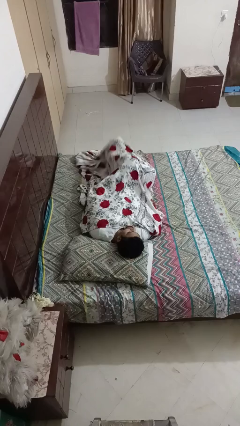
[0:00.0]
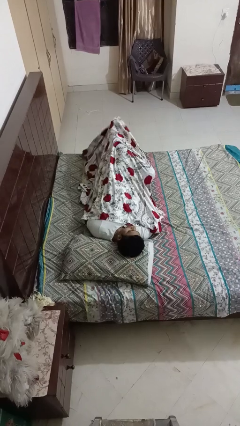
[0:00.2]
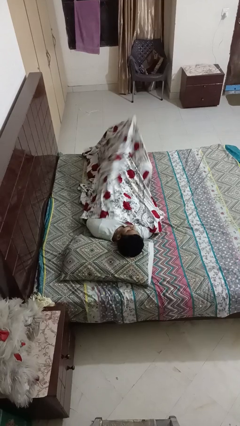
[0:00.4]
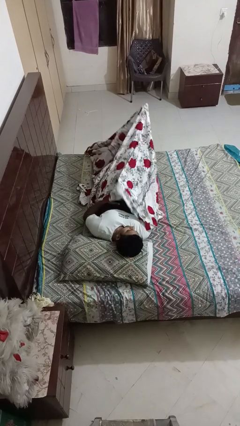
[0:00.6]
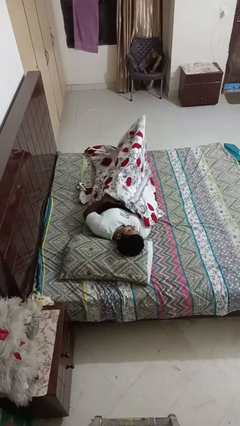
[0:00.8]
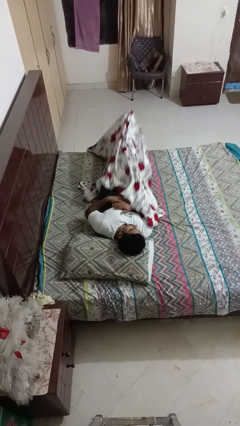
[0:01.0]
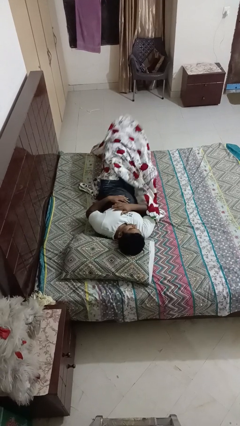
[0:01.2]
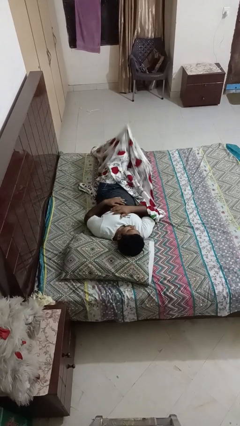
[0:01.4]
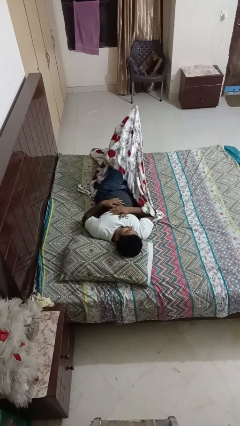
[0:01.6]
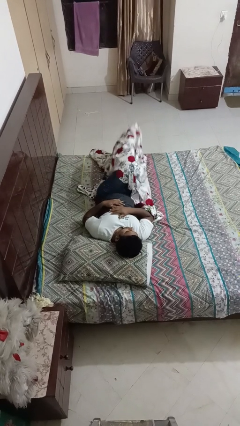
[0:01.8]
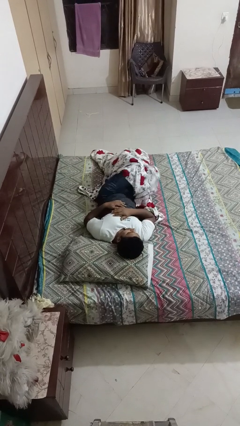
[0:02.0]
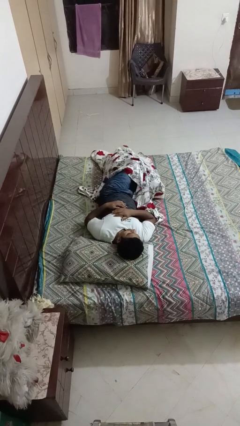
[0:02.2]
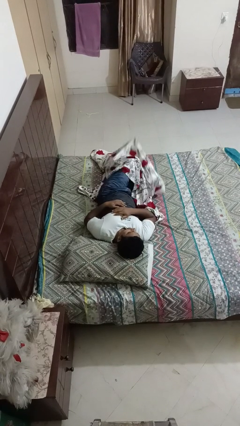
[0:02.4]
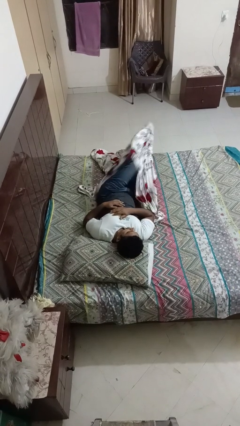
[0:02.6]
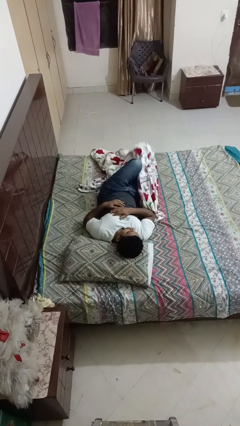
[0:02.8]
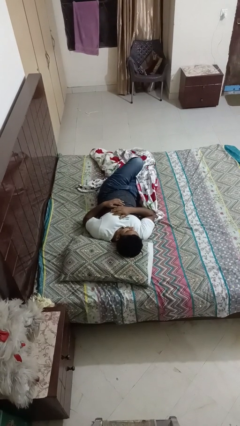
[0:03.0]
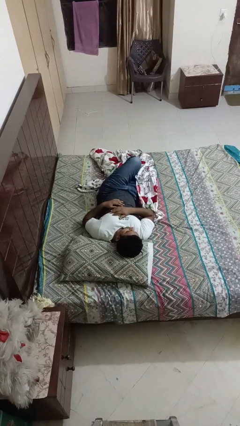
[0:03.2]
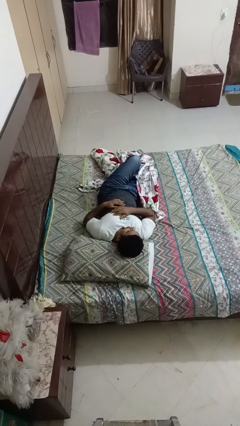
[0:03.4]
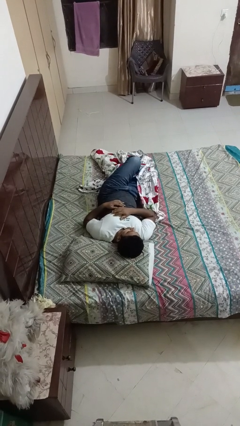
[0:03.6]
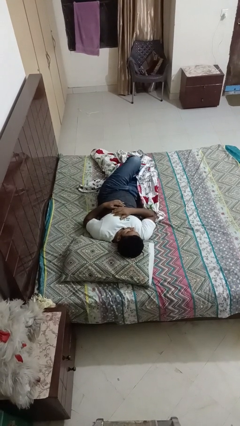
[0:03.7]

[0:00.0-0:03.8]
person uncovers with bedsheets

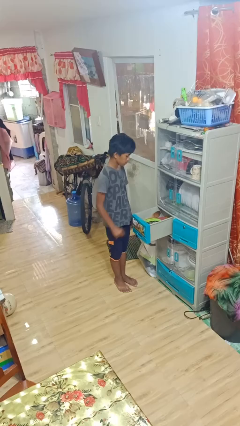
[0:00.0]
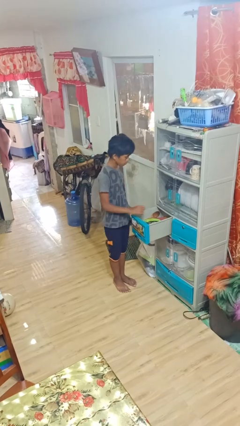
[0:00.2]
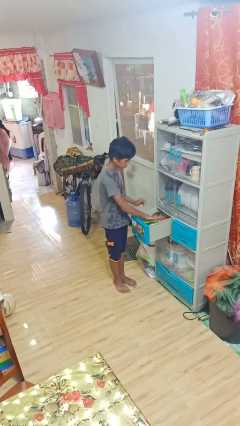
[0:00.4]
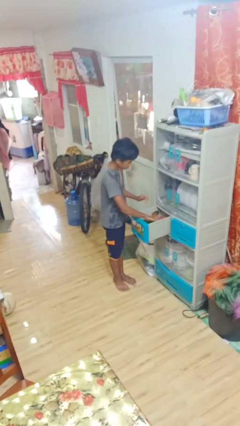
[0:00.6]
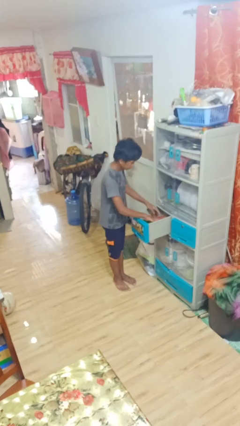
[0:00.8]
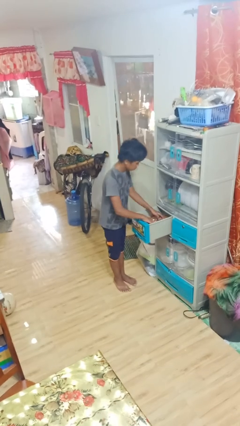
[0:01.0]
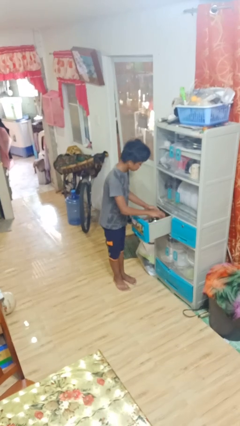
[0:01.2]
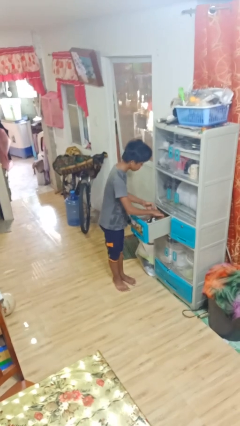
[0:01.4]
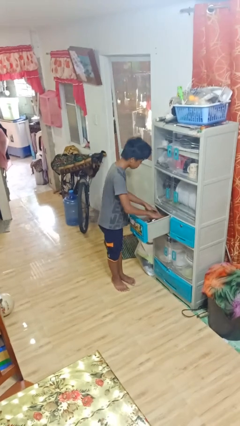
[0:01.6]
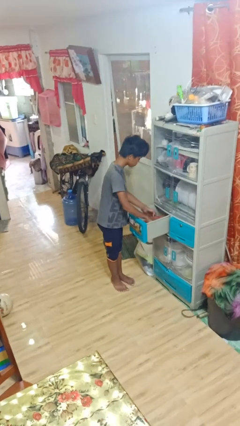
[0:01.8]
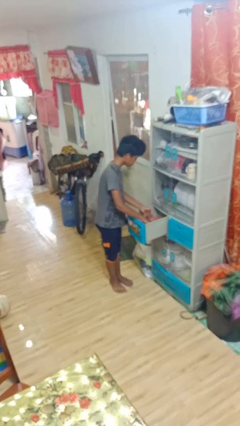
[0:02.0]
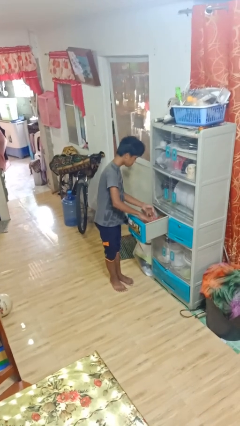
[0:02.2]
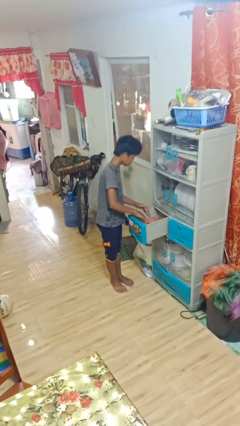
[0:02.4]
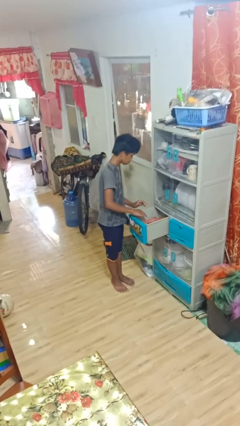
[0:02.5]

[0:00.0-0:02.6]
person searches in kitchen drawer

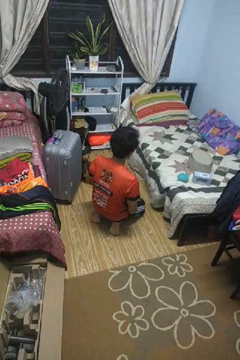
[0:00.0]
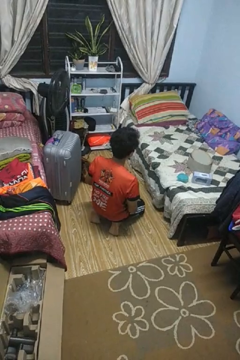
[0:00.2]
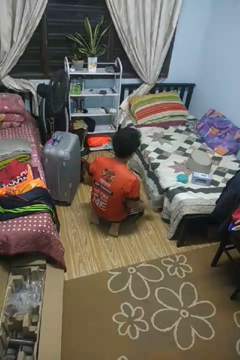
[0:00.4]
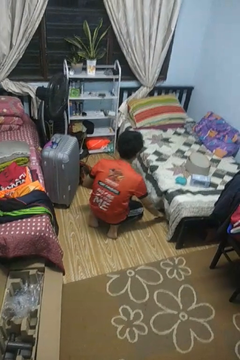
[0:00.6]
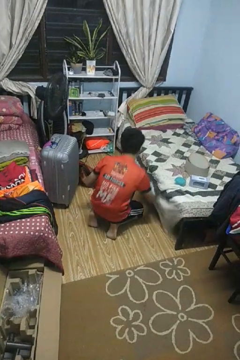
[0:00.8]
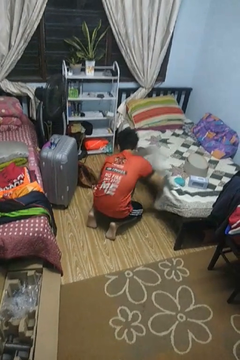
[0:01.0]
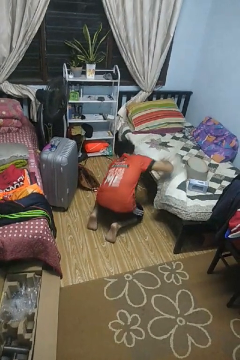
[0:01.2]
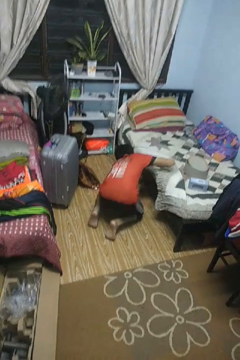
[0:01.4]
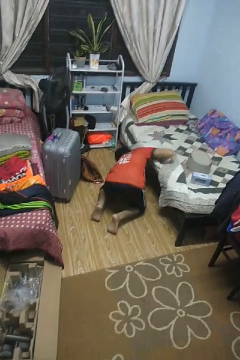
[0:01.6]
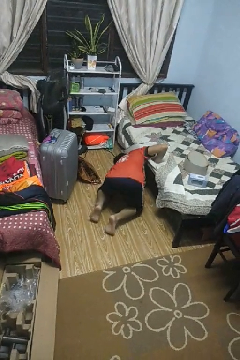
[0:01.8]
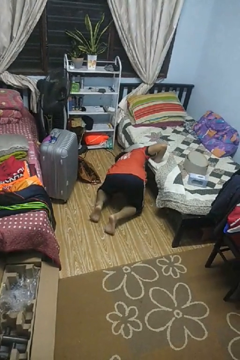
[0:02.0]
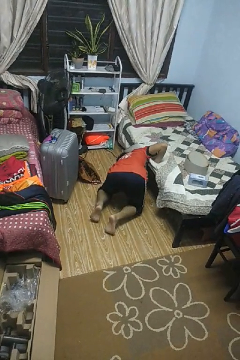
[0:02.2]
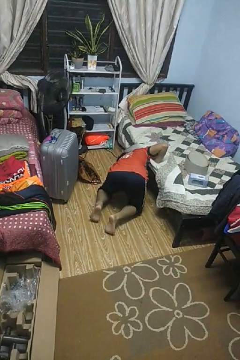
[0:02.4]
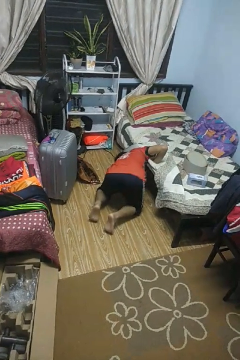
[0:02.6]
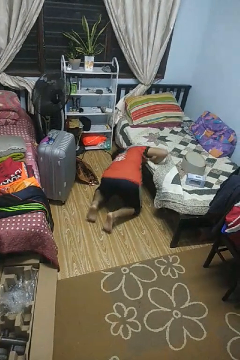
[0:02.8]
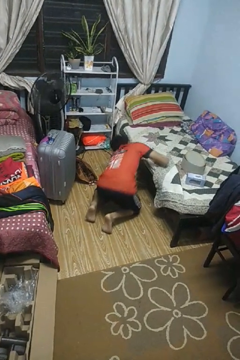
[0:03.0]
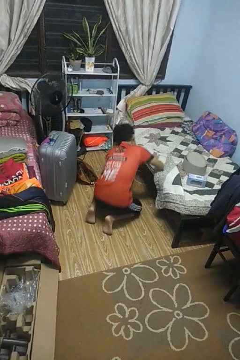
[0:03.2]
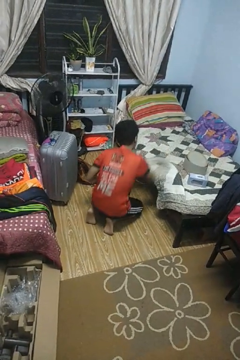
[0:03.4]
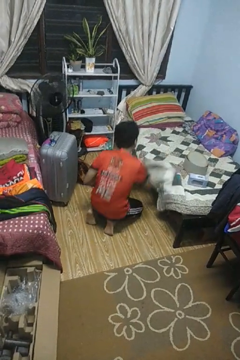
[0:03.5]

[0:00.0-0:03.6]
person searches under bed

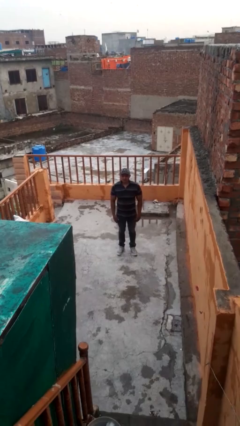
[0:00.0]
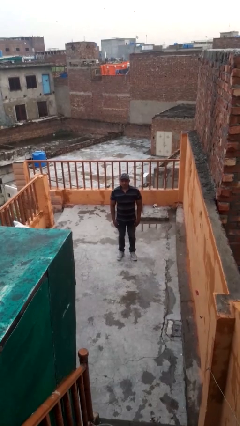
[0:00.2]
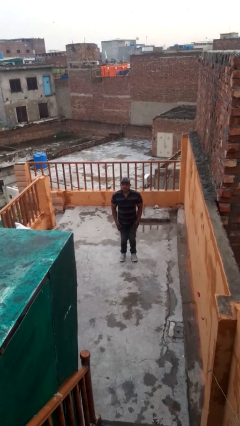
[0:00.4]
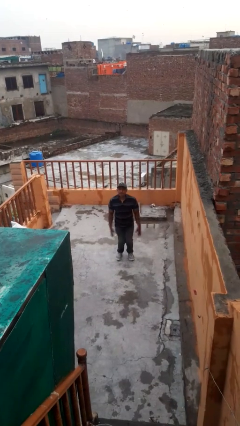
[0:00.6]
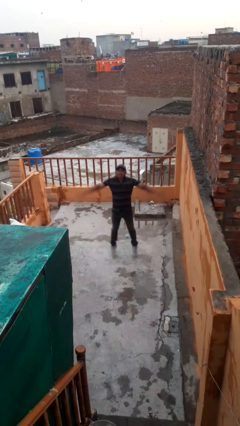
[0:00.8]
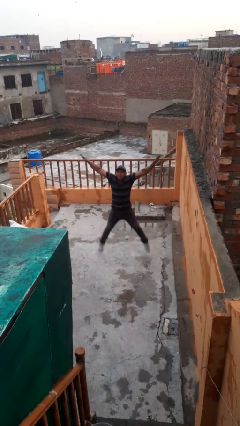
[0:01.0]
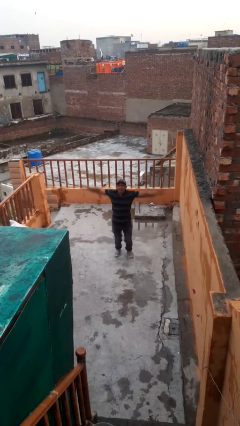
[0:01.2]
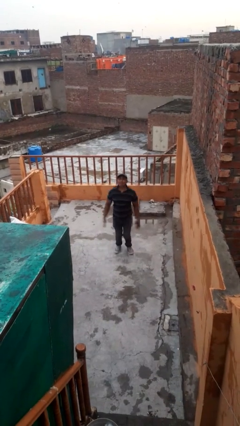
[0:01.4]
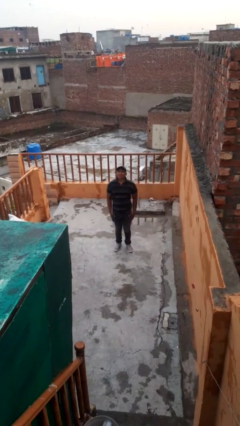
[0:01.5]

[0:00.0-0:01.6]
person exercises with jumping jacks

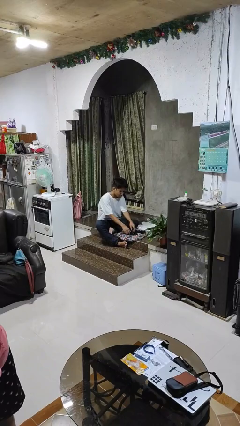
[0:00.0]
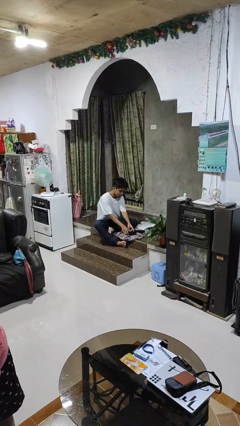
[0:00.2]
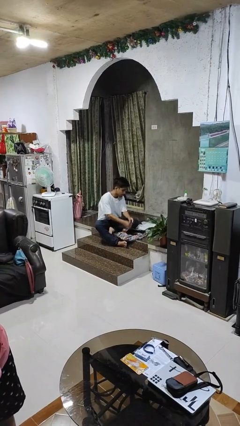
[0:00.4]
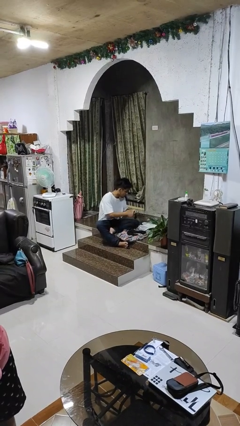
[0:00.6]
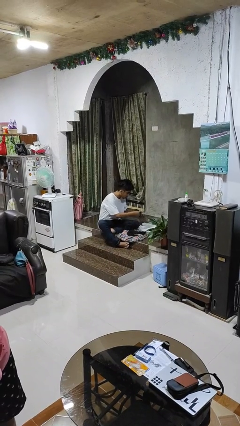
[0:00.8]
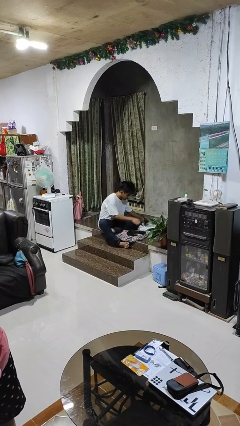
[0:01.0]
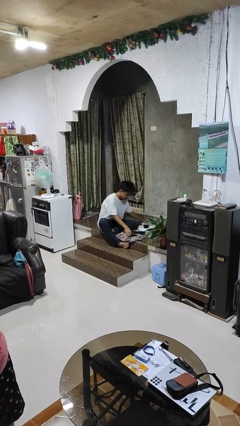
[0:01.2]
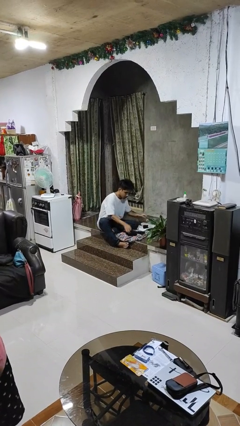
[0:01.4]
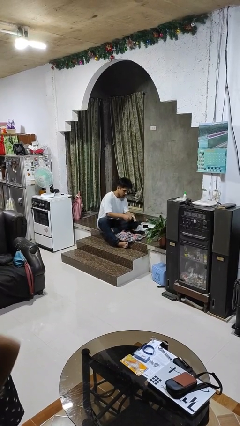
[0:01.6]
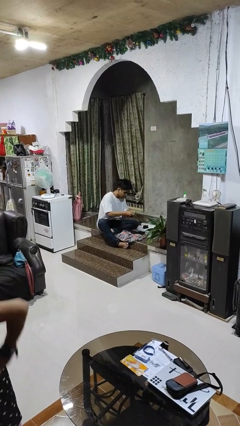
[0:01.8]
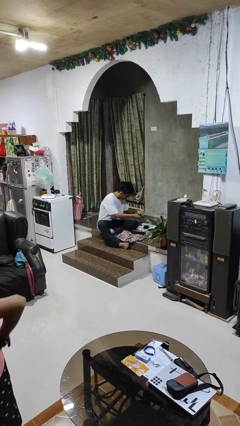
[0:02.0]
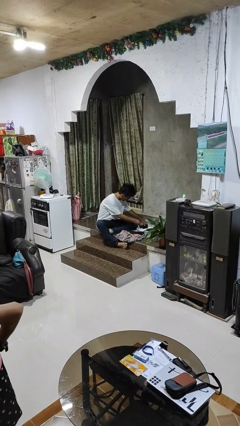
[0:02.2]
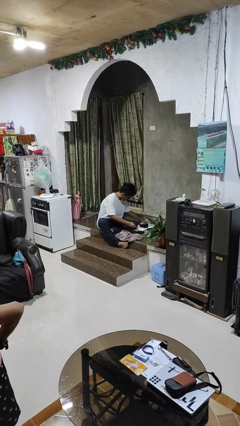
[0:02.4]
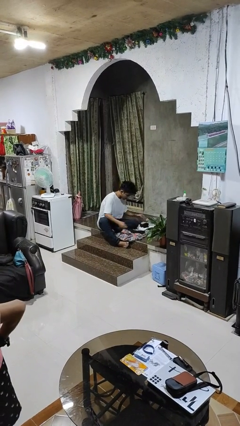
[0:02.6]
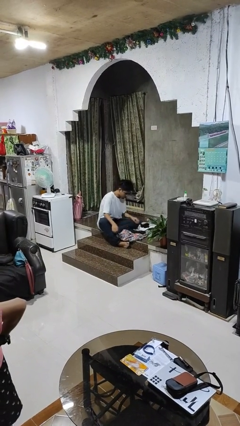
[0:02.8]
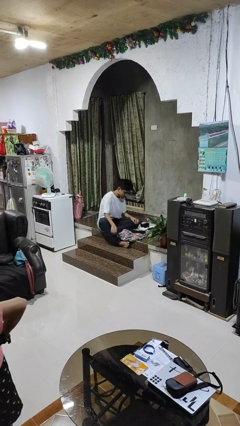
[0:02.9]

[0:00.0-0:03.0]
person folds socks

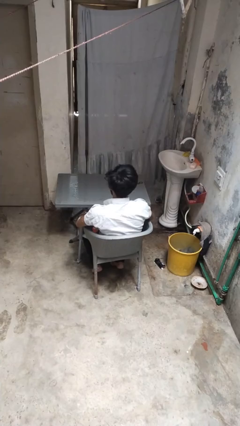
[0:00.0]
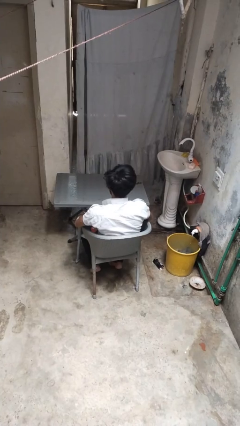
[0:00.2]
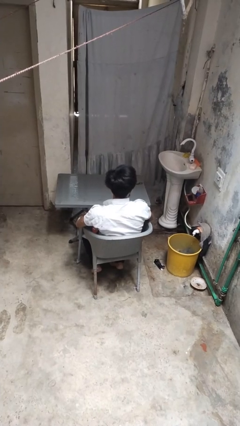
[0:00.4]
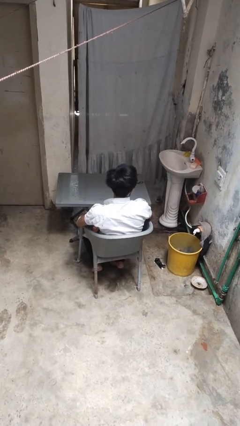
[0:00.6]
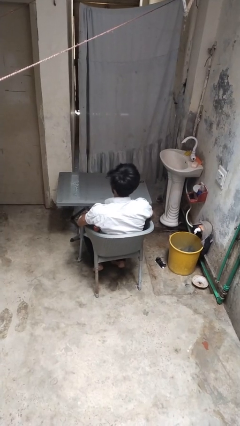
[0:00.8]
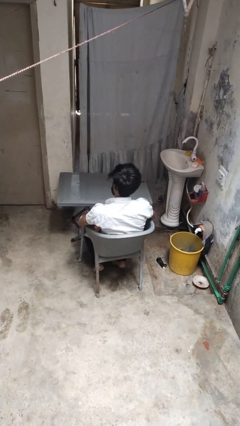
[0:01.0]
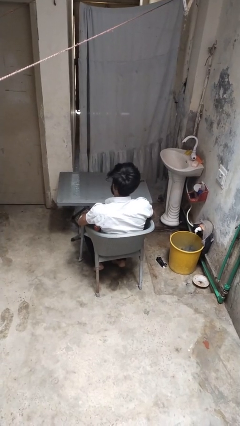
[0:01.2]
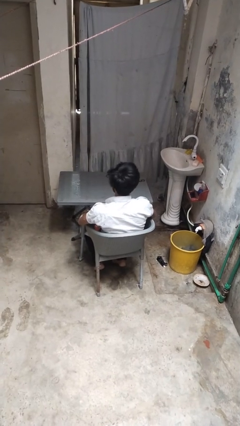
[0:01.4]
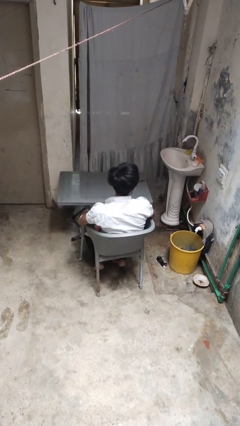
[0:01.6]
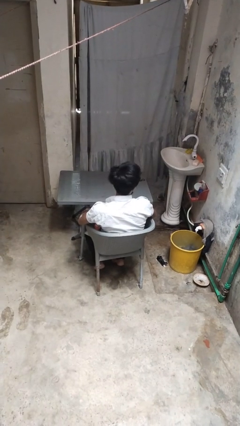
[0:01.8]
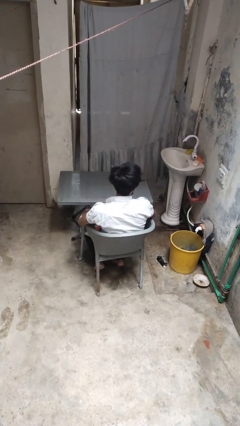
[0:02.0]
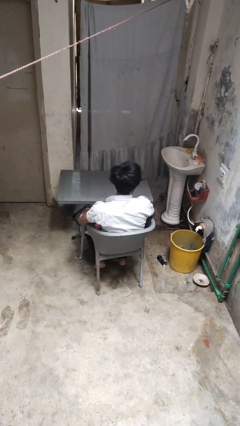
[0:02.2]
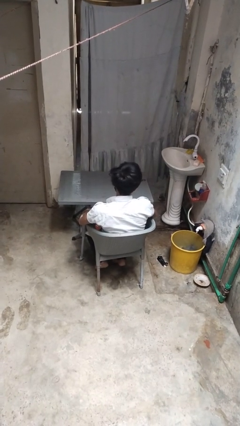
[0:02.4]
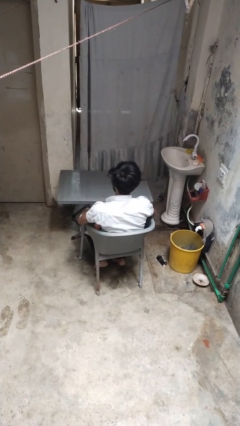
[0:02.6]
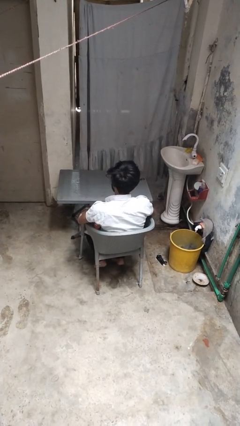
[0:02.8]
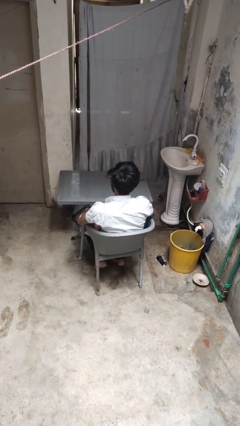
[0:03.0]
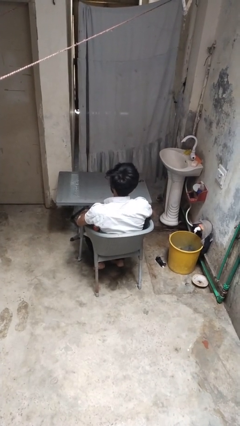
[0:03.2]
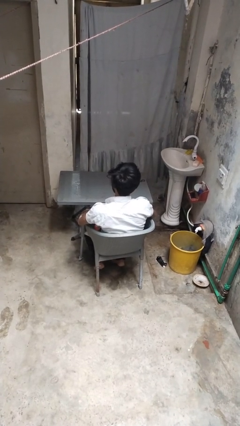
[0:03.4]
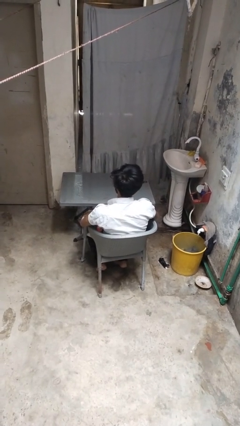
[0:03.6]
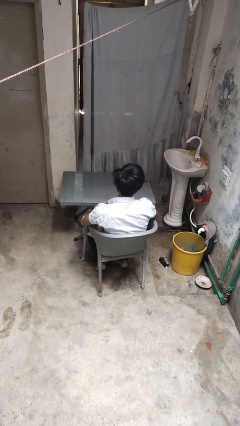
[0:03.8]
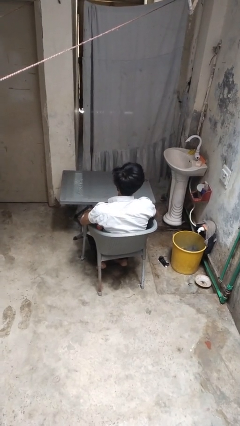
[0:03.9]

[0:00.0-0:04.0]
person shakes head
